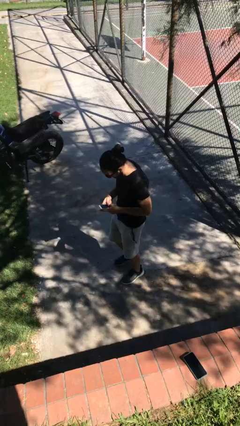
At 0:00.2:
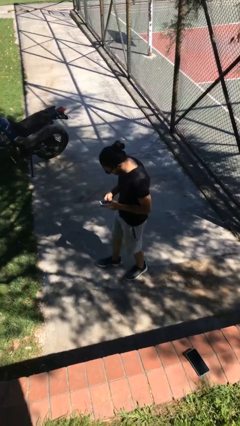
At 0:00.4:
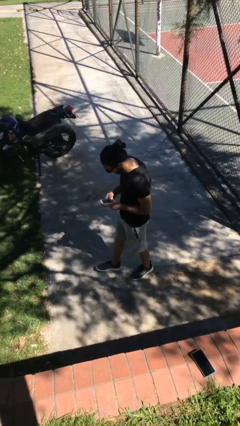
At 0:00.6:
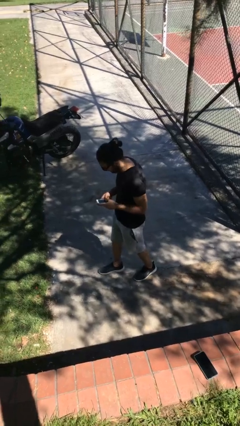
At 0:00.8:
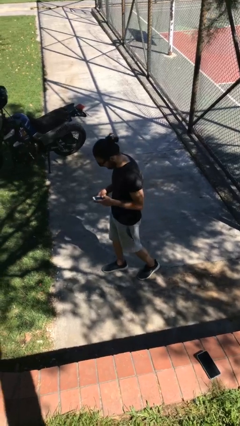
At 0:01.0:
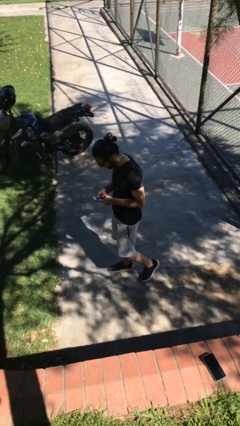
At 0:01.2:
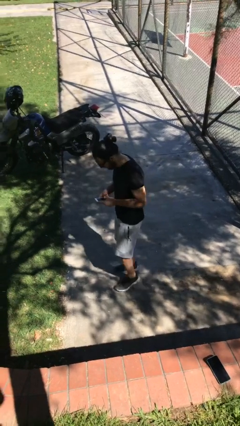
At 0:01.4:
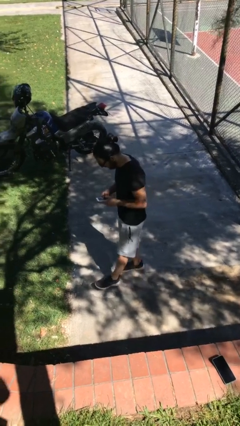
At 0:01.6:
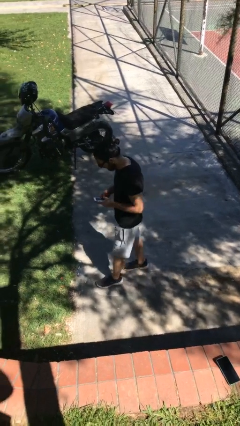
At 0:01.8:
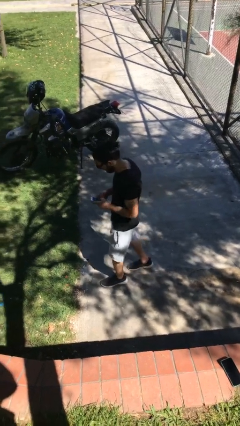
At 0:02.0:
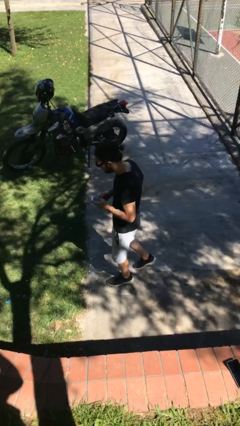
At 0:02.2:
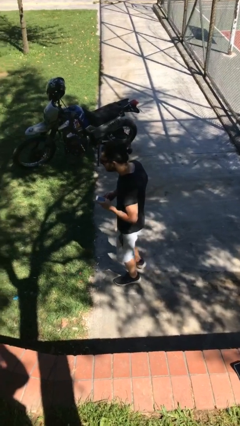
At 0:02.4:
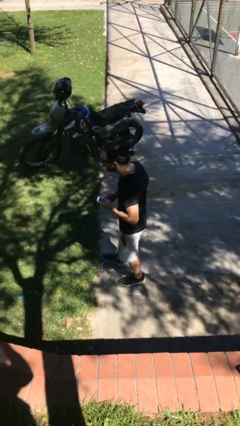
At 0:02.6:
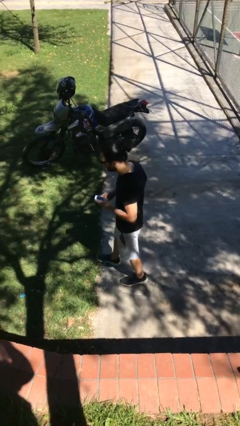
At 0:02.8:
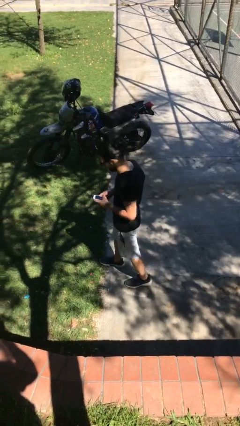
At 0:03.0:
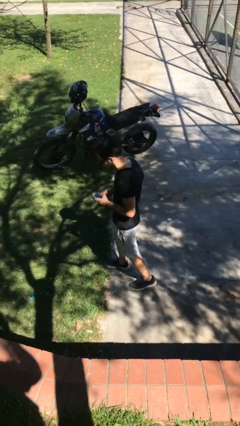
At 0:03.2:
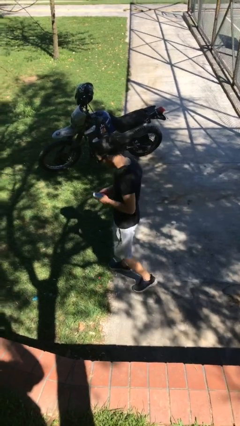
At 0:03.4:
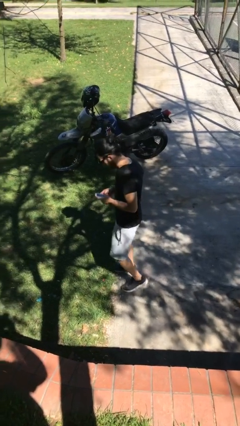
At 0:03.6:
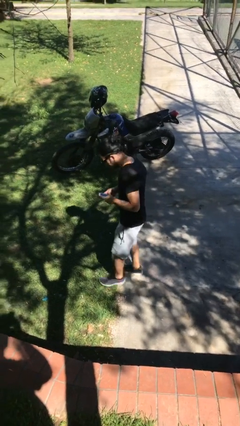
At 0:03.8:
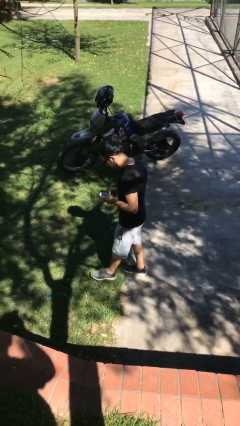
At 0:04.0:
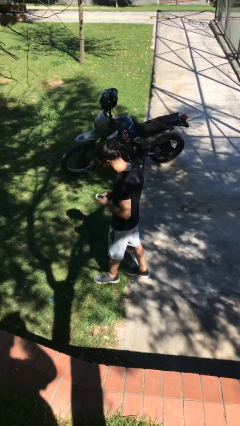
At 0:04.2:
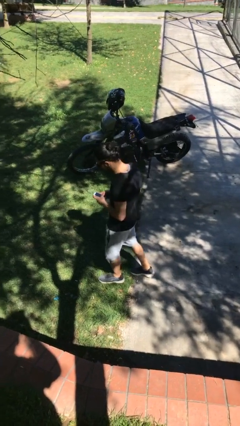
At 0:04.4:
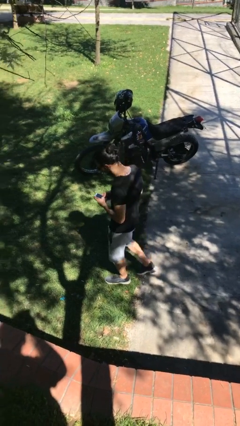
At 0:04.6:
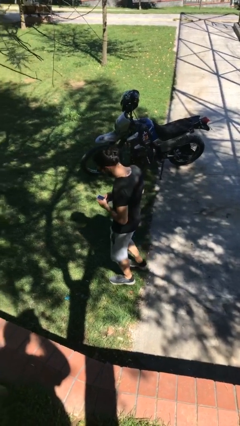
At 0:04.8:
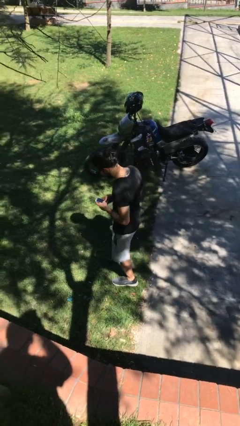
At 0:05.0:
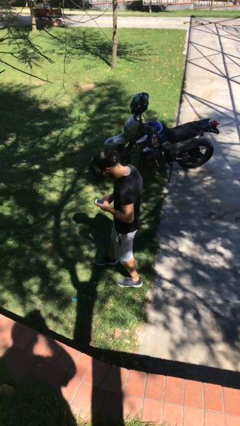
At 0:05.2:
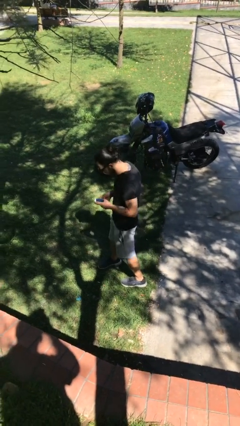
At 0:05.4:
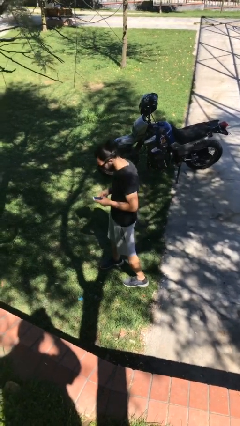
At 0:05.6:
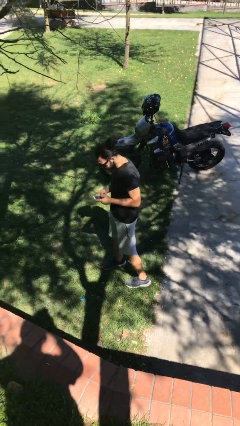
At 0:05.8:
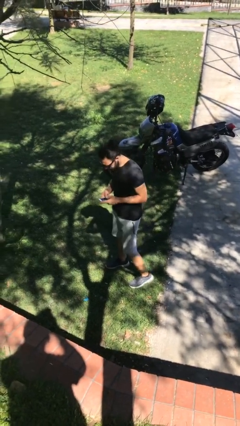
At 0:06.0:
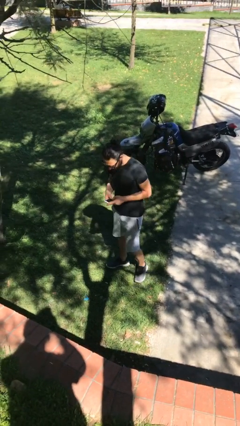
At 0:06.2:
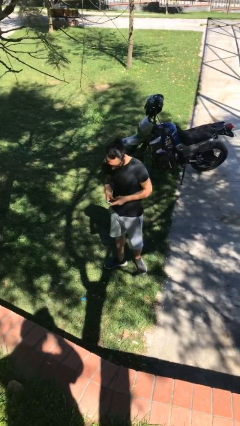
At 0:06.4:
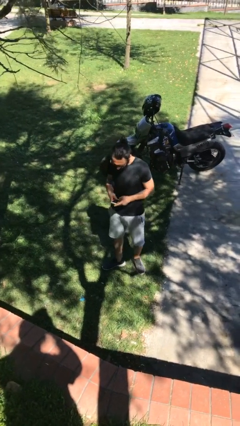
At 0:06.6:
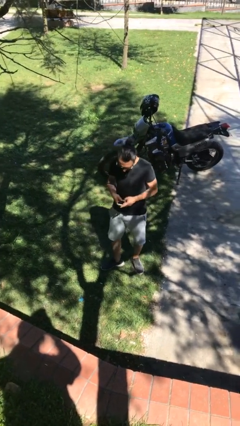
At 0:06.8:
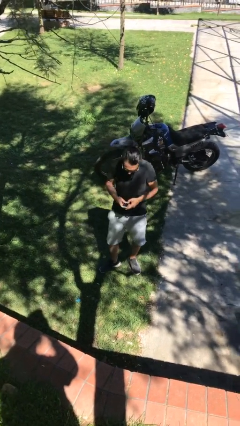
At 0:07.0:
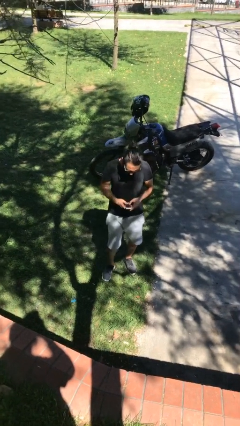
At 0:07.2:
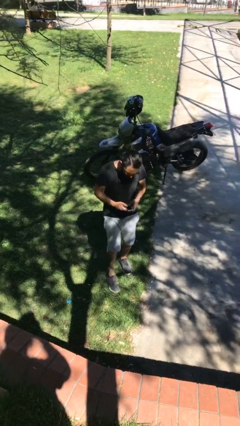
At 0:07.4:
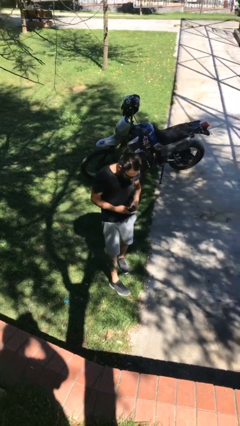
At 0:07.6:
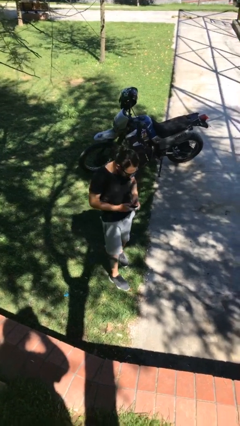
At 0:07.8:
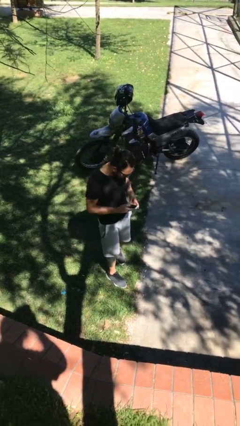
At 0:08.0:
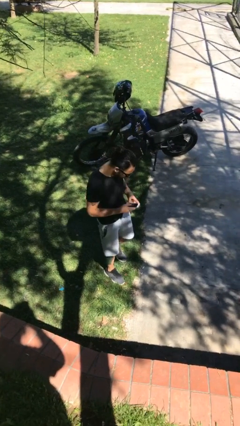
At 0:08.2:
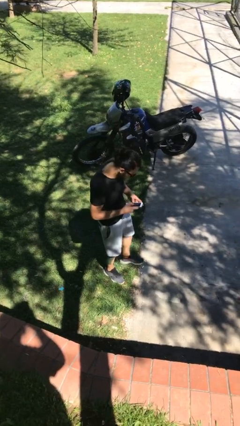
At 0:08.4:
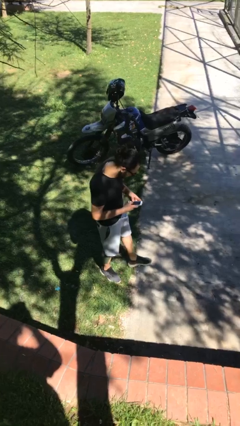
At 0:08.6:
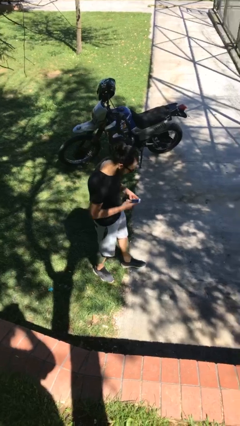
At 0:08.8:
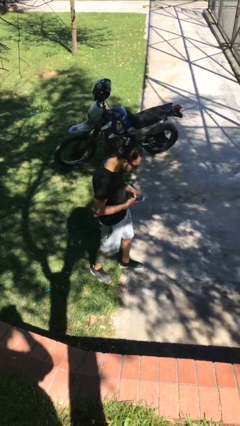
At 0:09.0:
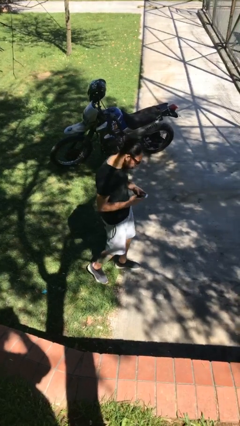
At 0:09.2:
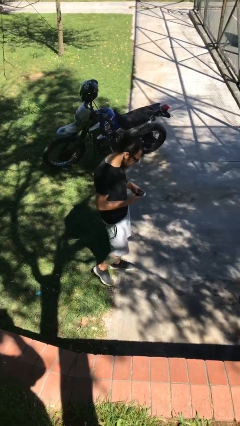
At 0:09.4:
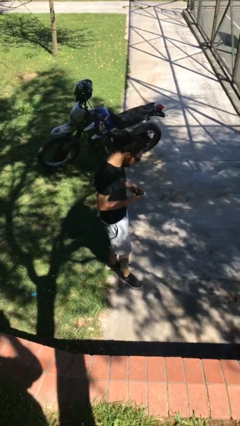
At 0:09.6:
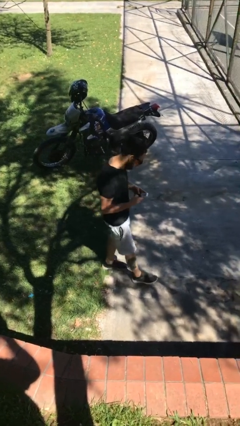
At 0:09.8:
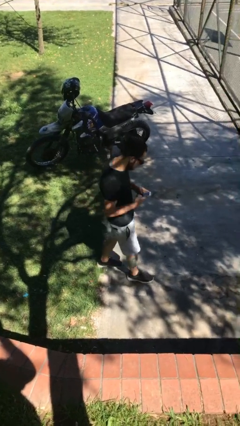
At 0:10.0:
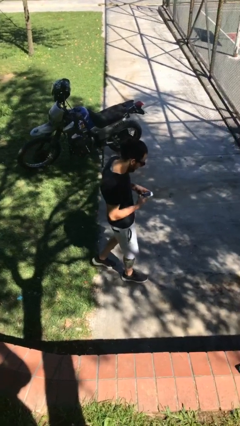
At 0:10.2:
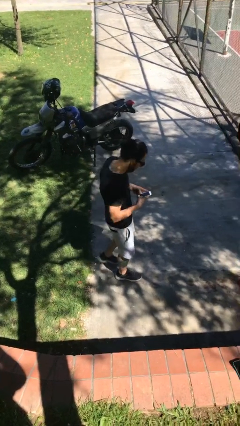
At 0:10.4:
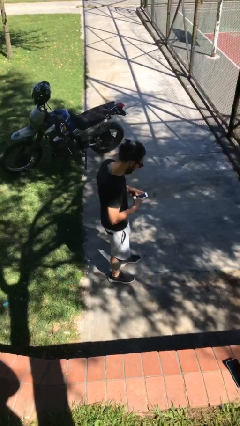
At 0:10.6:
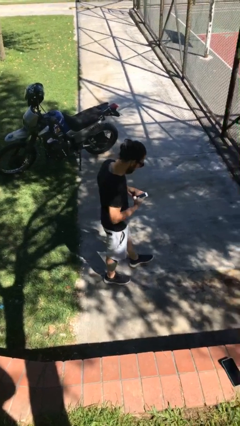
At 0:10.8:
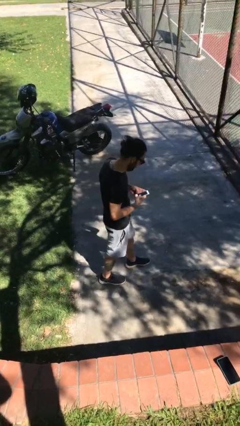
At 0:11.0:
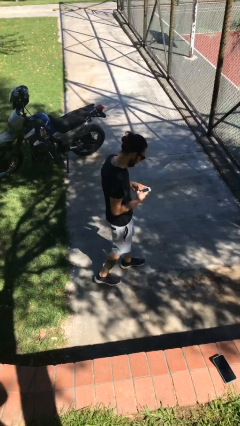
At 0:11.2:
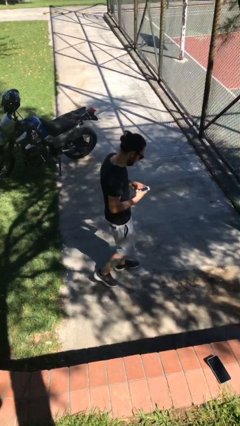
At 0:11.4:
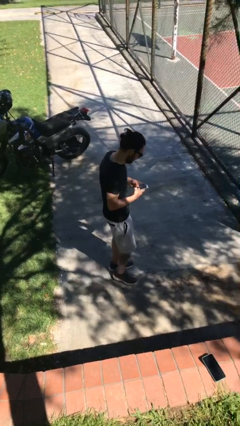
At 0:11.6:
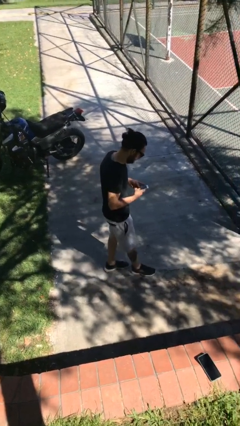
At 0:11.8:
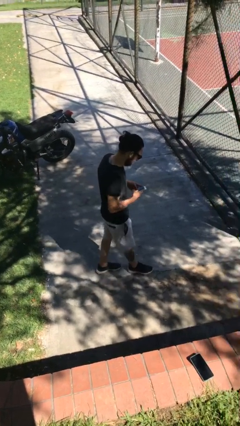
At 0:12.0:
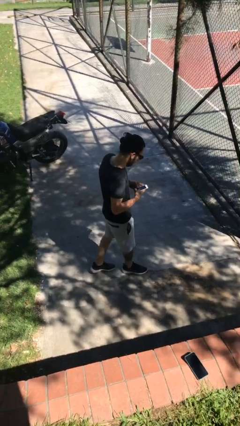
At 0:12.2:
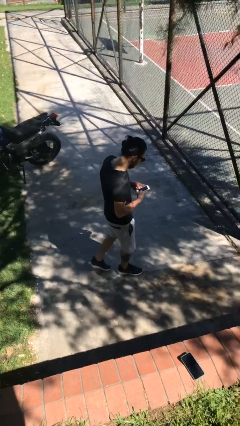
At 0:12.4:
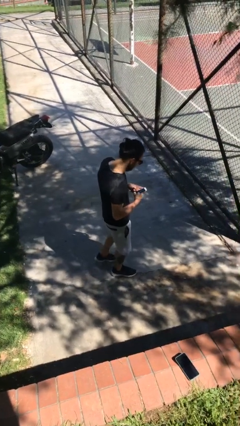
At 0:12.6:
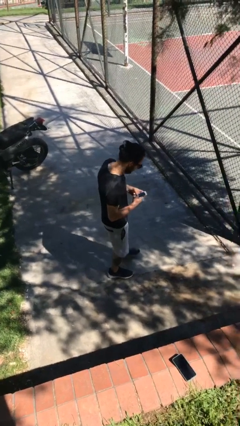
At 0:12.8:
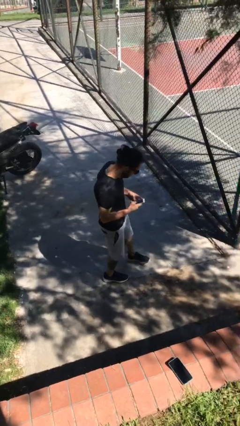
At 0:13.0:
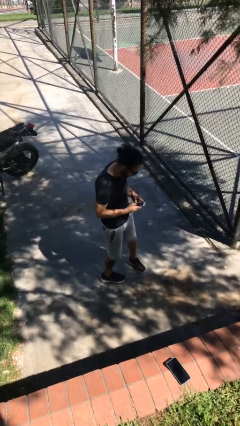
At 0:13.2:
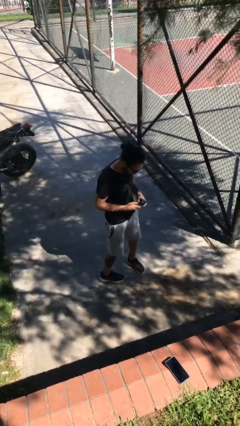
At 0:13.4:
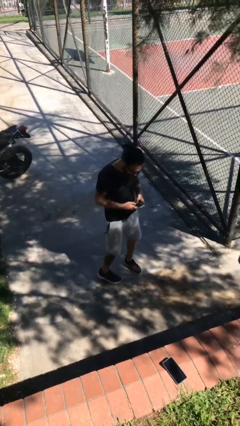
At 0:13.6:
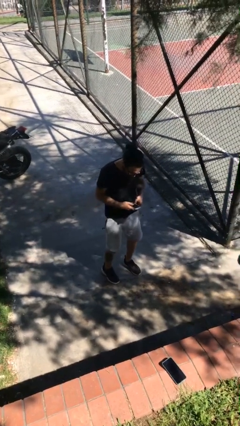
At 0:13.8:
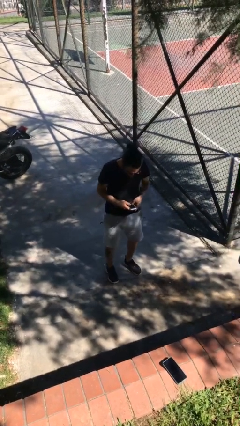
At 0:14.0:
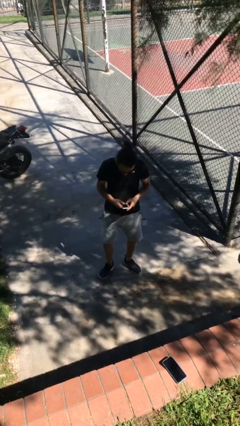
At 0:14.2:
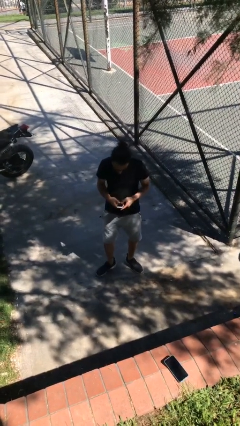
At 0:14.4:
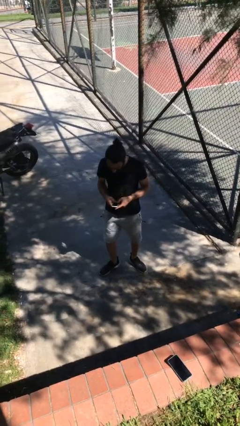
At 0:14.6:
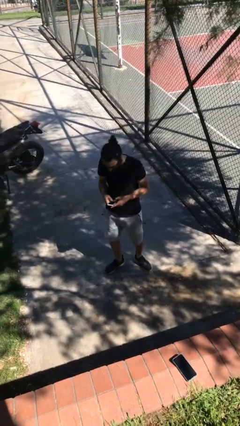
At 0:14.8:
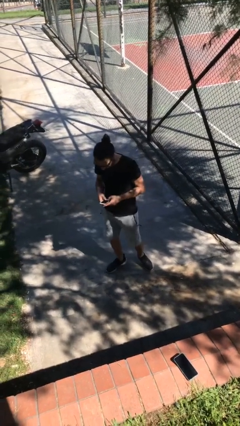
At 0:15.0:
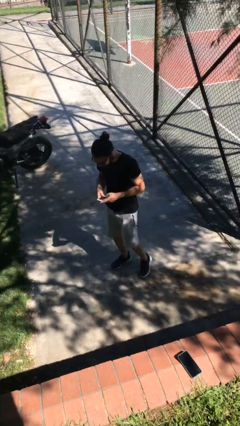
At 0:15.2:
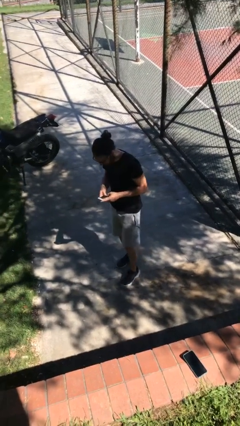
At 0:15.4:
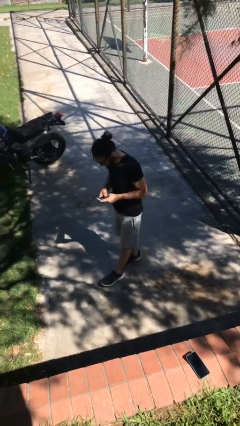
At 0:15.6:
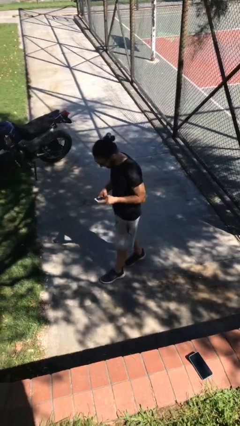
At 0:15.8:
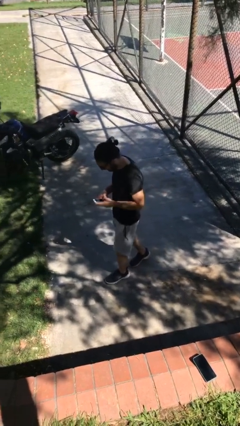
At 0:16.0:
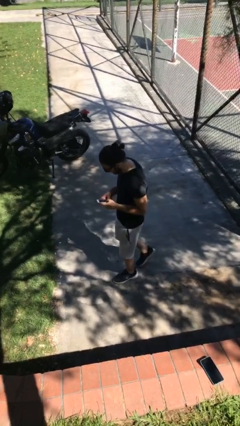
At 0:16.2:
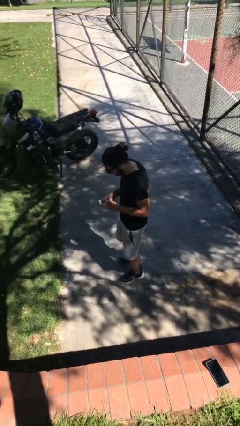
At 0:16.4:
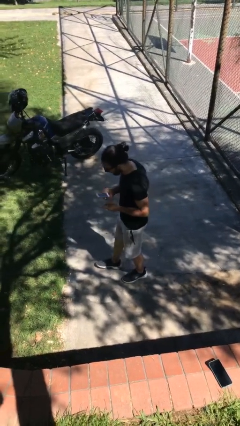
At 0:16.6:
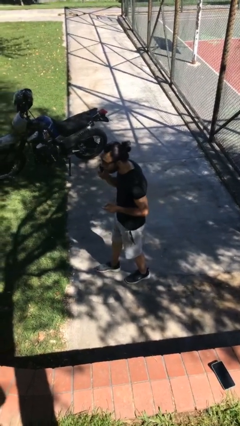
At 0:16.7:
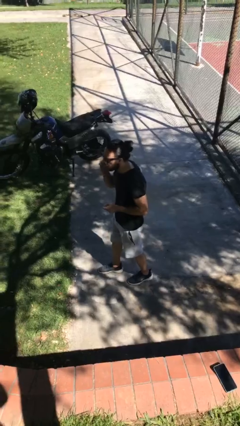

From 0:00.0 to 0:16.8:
person texts on phone

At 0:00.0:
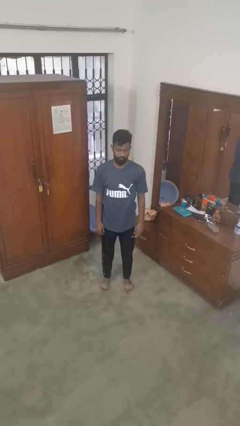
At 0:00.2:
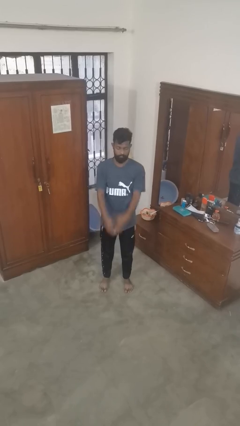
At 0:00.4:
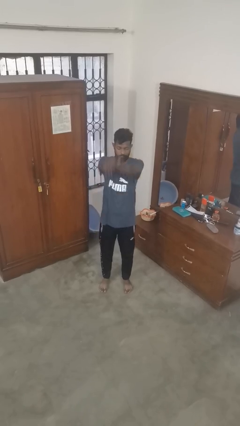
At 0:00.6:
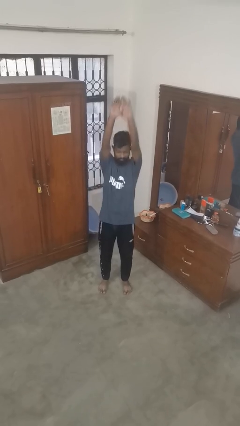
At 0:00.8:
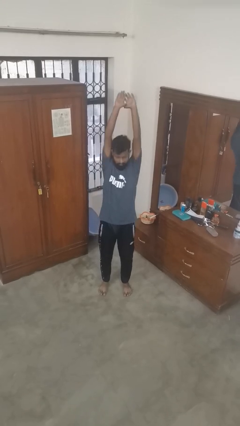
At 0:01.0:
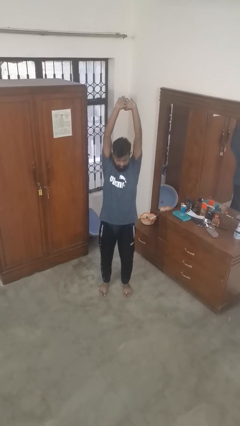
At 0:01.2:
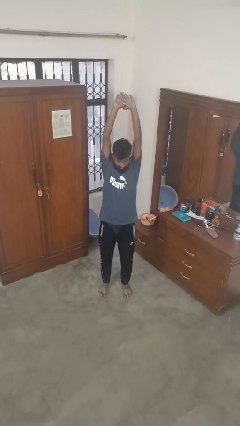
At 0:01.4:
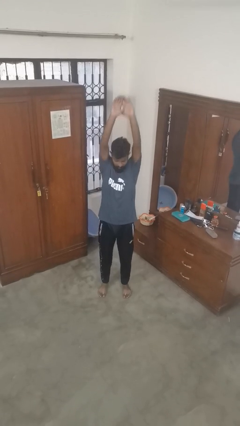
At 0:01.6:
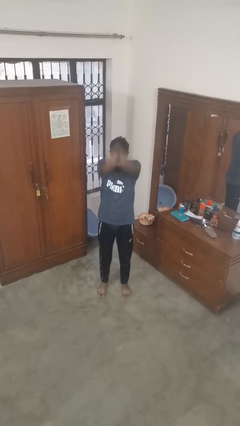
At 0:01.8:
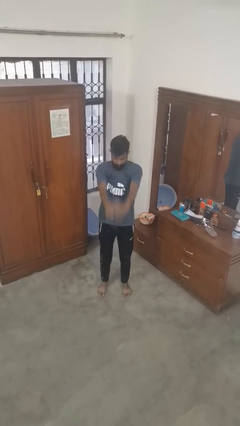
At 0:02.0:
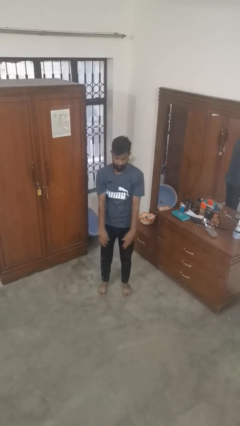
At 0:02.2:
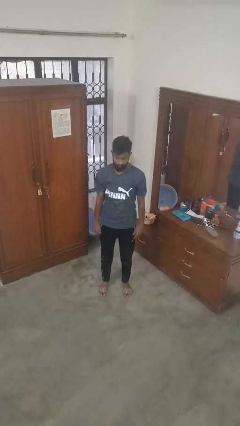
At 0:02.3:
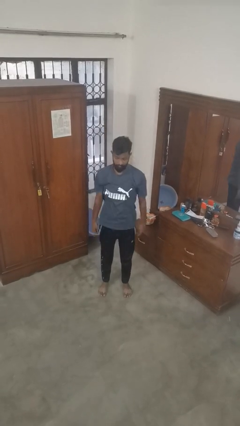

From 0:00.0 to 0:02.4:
person stretches arms over head
